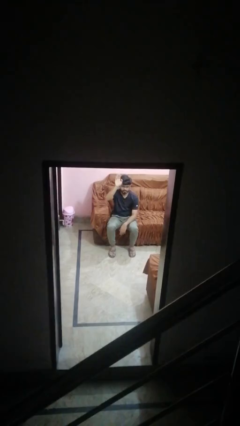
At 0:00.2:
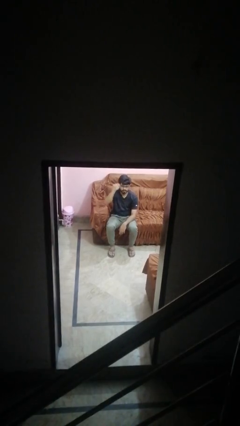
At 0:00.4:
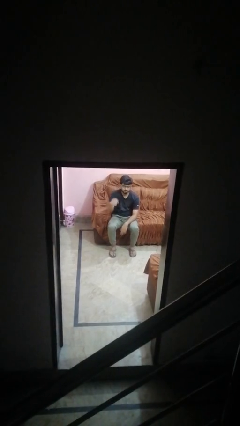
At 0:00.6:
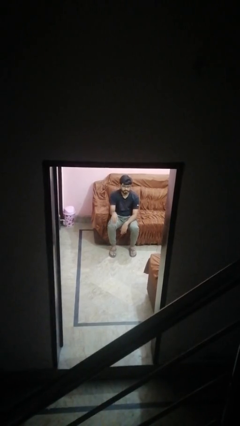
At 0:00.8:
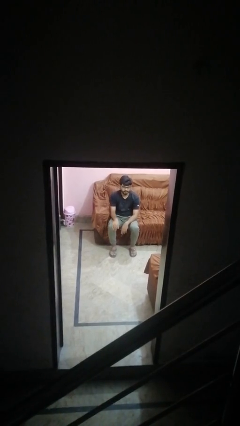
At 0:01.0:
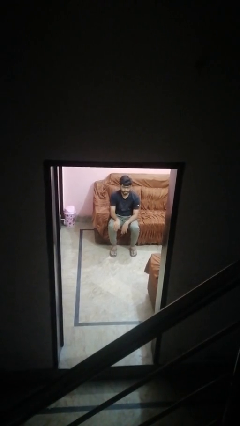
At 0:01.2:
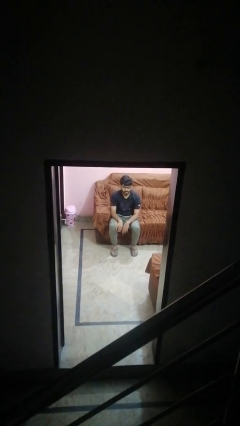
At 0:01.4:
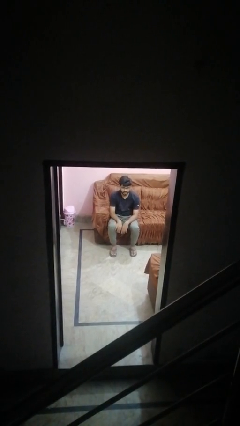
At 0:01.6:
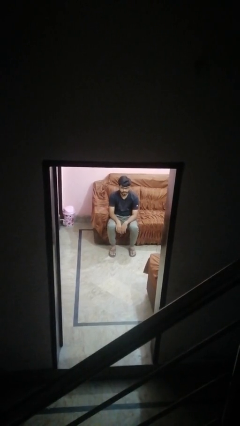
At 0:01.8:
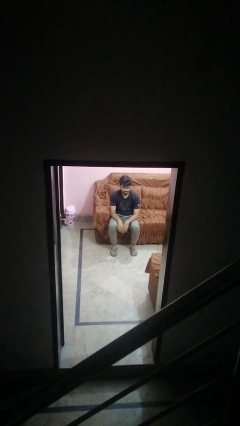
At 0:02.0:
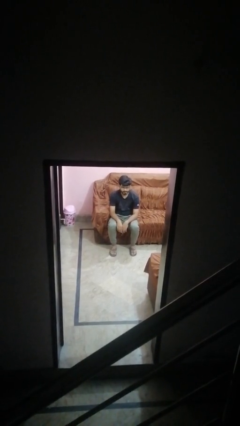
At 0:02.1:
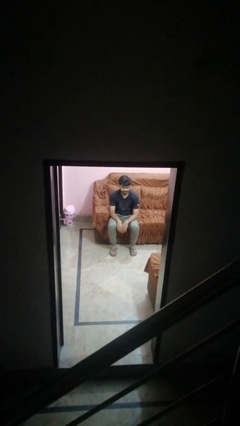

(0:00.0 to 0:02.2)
person gestures lower hand

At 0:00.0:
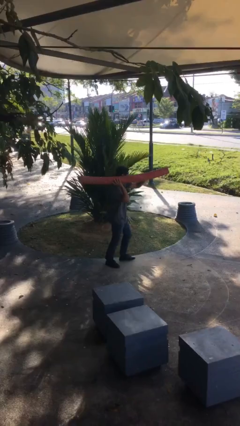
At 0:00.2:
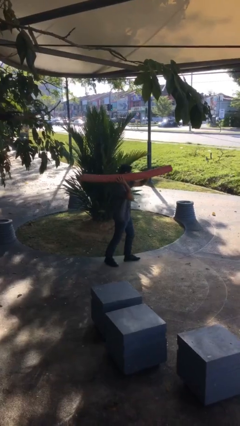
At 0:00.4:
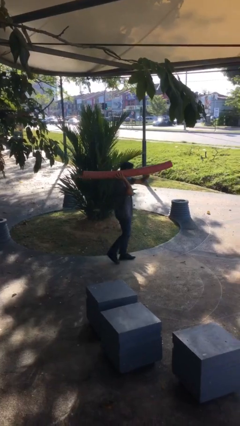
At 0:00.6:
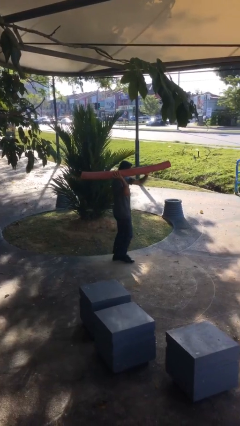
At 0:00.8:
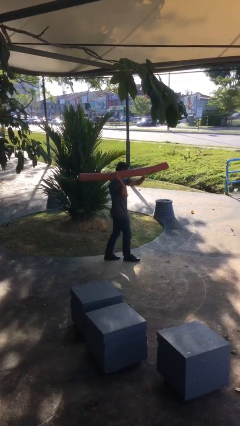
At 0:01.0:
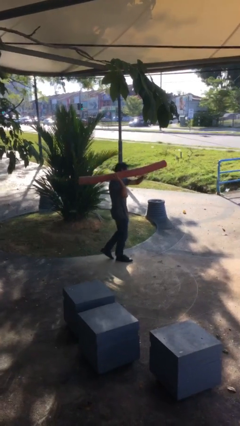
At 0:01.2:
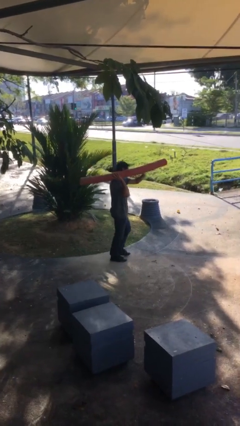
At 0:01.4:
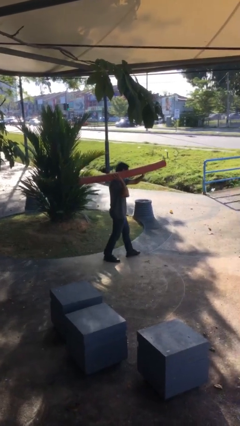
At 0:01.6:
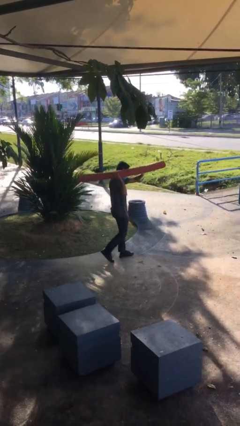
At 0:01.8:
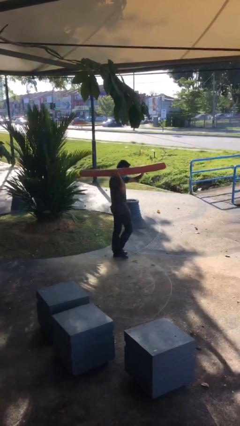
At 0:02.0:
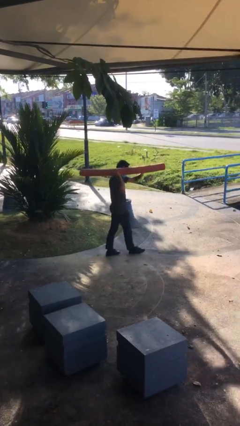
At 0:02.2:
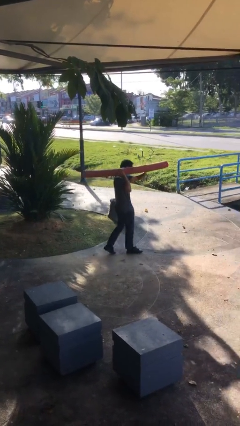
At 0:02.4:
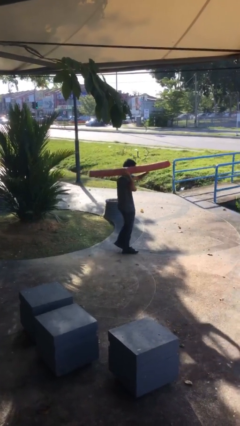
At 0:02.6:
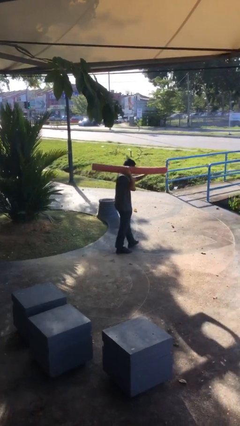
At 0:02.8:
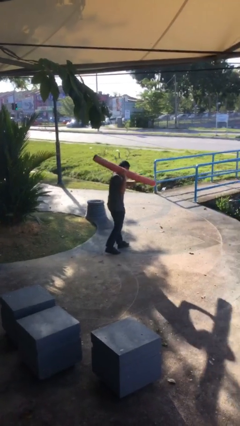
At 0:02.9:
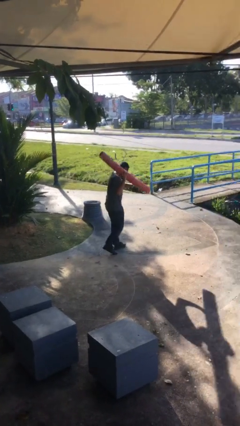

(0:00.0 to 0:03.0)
person carries heavy object

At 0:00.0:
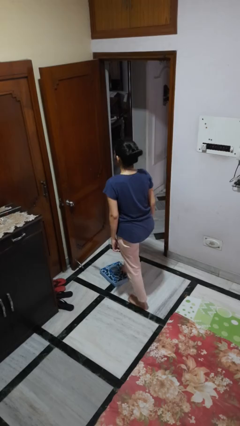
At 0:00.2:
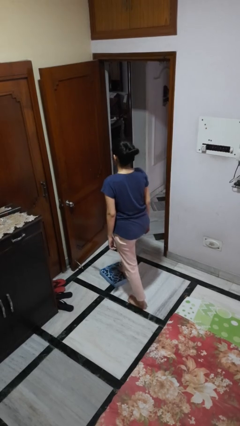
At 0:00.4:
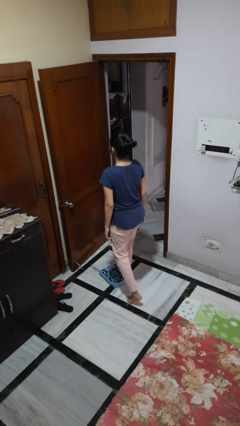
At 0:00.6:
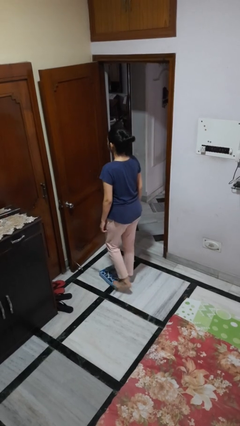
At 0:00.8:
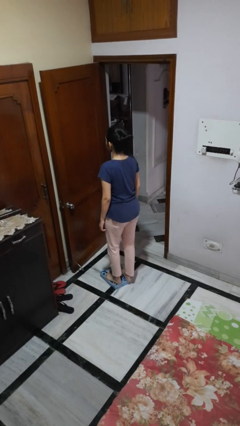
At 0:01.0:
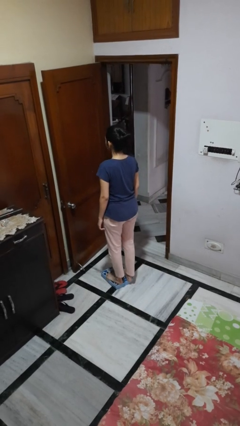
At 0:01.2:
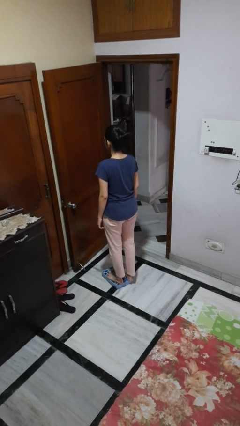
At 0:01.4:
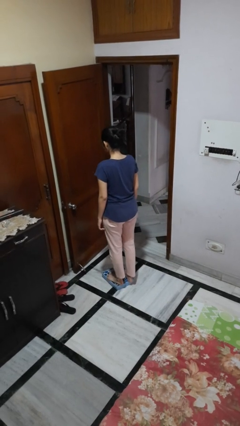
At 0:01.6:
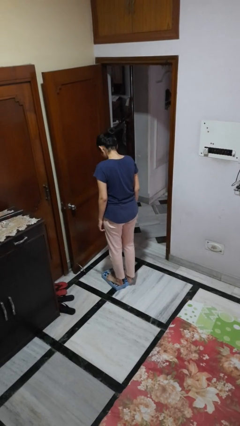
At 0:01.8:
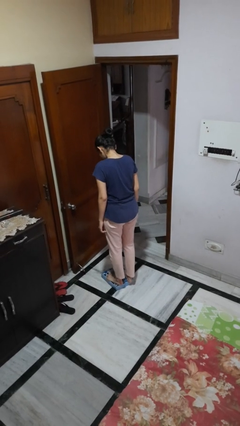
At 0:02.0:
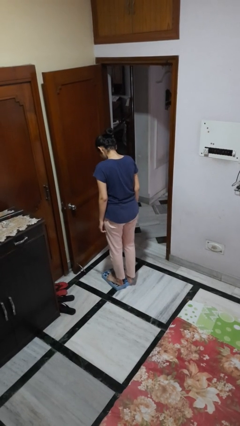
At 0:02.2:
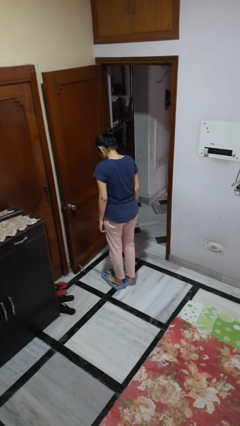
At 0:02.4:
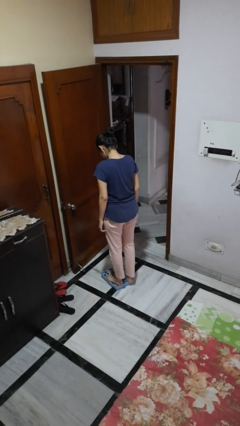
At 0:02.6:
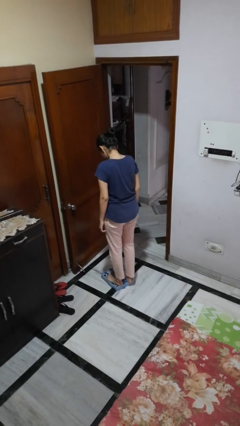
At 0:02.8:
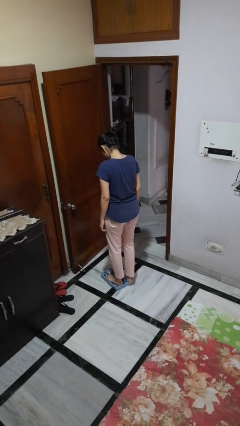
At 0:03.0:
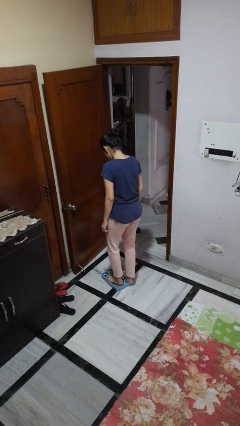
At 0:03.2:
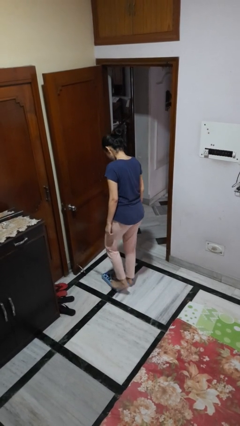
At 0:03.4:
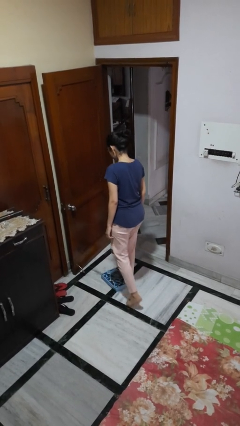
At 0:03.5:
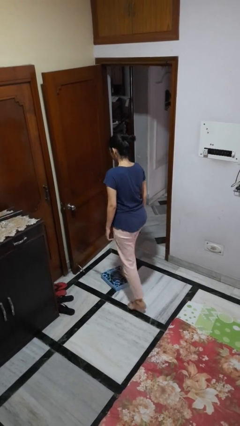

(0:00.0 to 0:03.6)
person uses bodyweight scale

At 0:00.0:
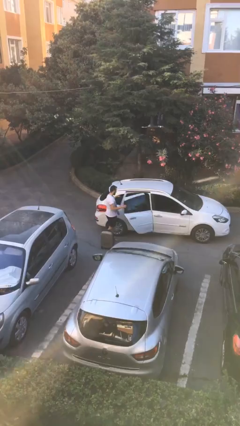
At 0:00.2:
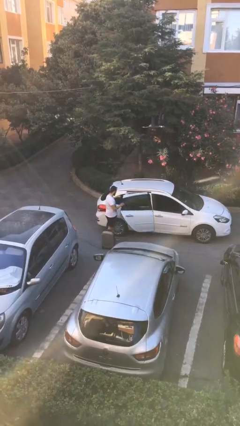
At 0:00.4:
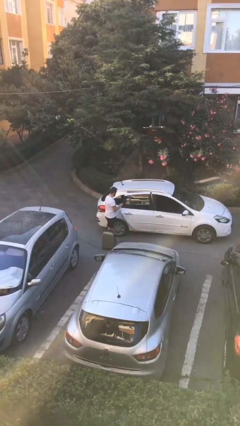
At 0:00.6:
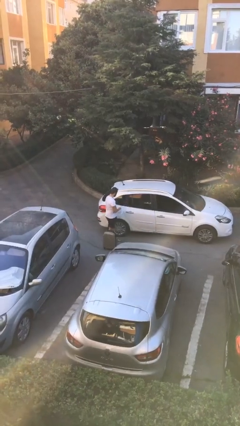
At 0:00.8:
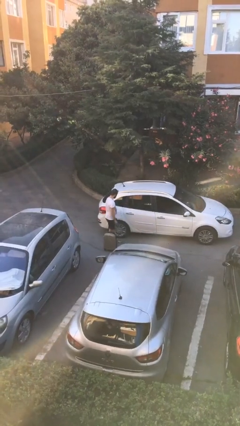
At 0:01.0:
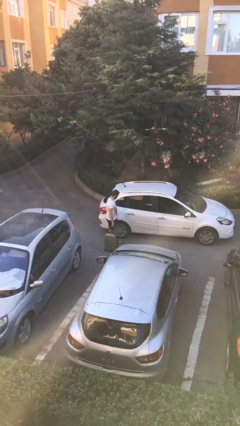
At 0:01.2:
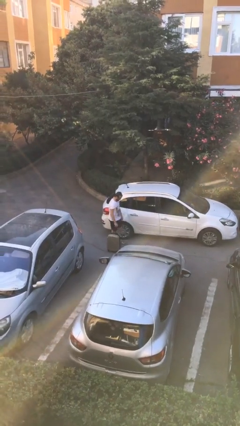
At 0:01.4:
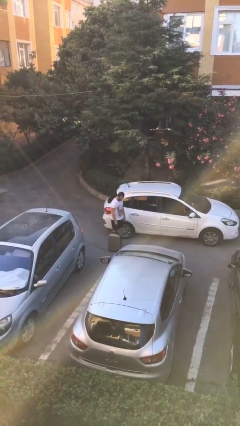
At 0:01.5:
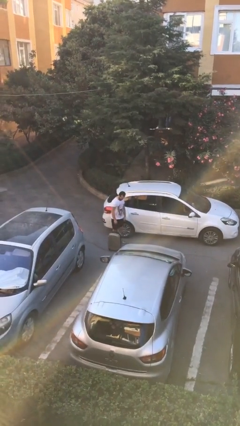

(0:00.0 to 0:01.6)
person closes car door

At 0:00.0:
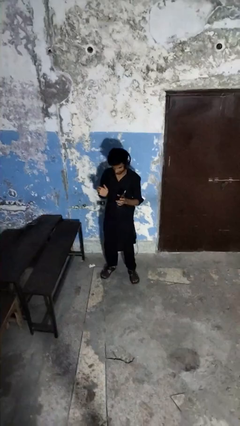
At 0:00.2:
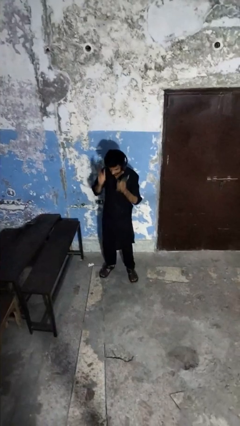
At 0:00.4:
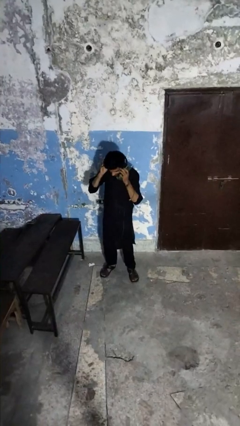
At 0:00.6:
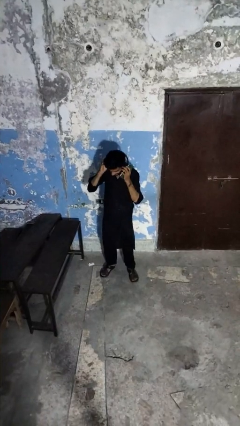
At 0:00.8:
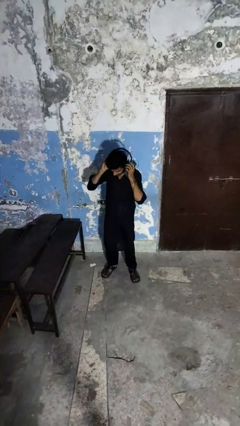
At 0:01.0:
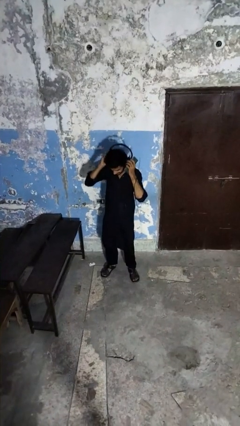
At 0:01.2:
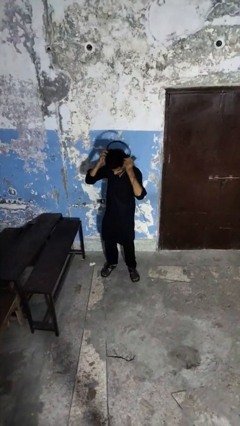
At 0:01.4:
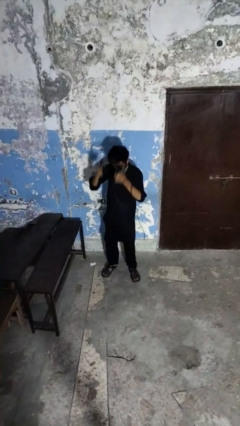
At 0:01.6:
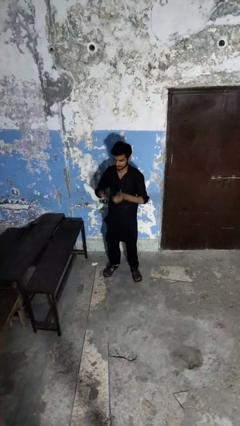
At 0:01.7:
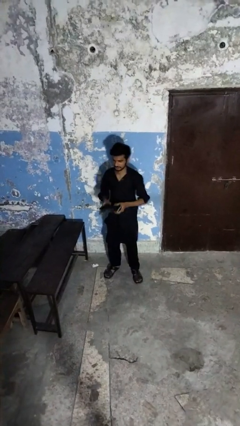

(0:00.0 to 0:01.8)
person takes off headphones

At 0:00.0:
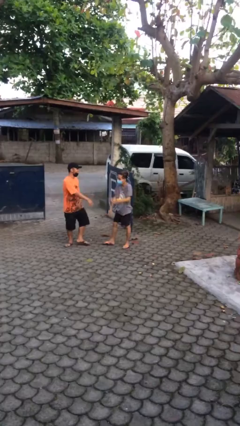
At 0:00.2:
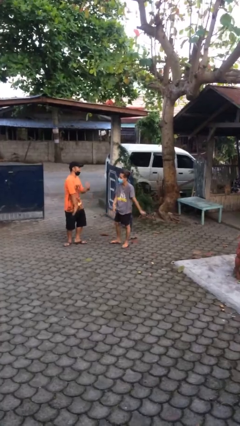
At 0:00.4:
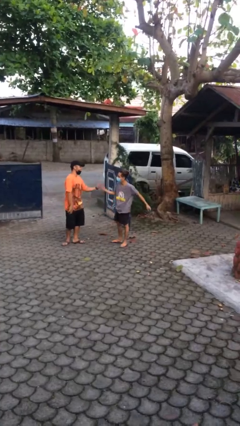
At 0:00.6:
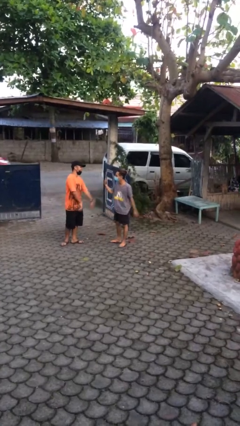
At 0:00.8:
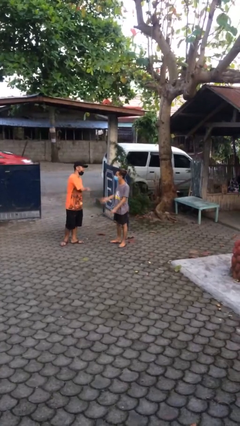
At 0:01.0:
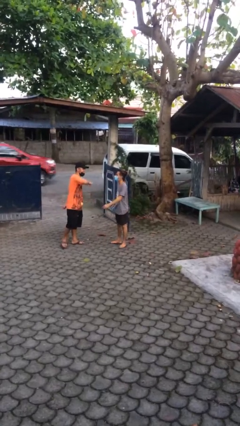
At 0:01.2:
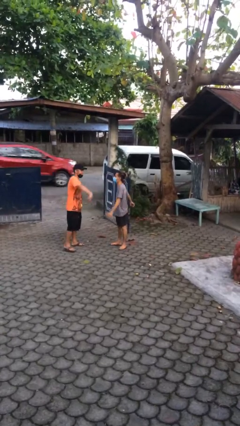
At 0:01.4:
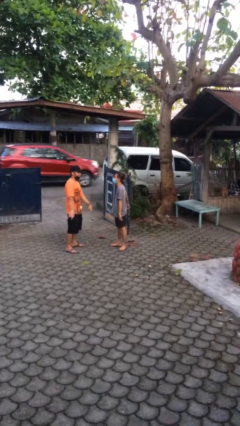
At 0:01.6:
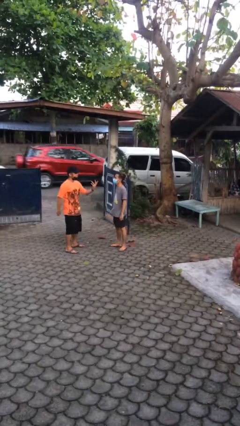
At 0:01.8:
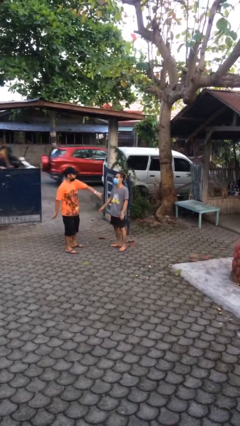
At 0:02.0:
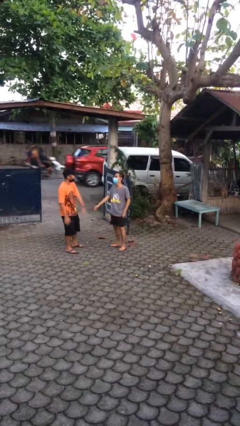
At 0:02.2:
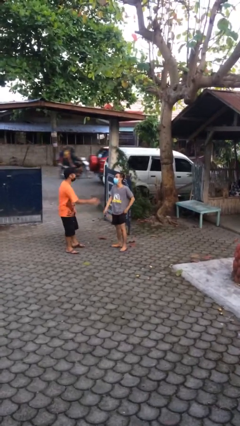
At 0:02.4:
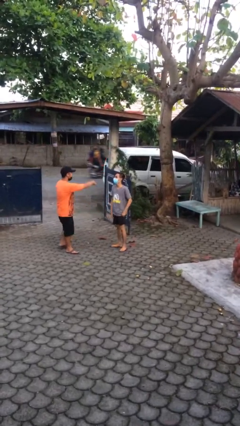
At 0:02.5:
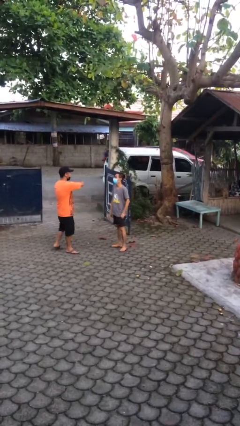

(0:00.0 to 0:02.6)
person talks to person

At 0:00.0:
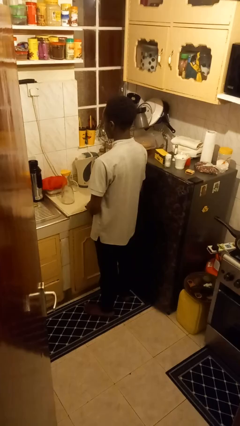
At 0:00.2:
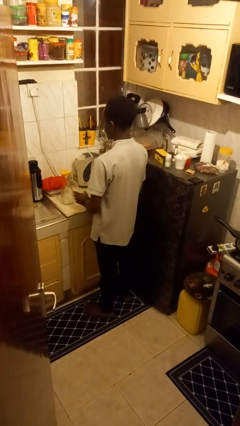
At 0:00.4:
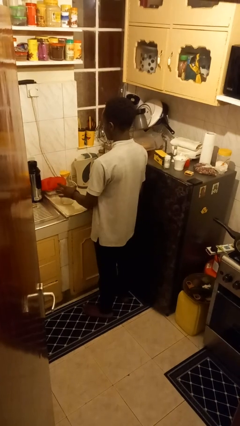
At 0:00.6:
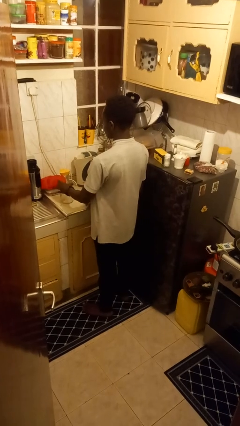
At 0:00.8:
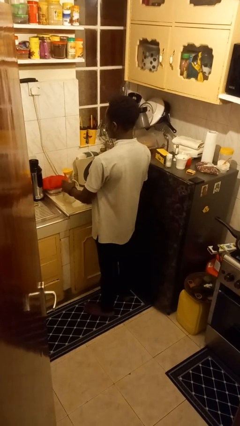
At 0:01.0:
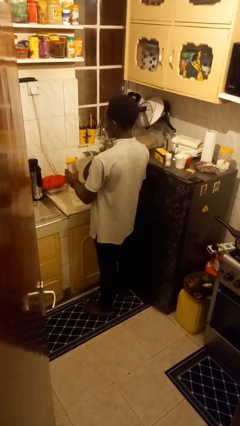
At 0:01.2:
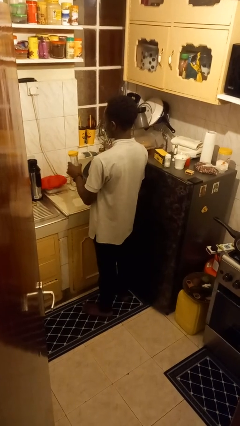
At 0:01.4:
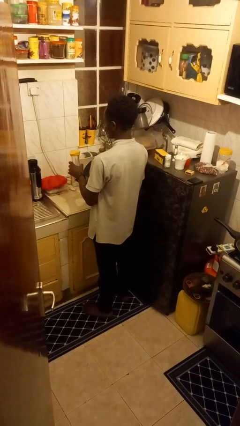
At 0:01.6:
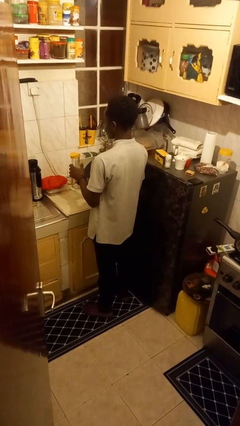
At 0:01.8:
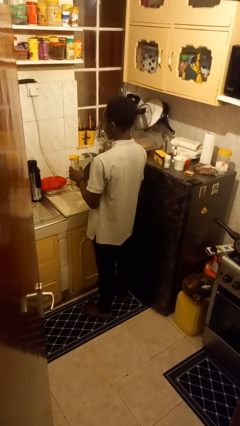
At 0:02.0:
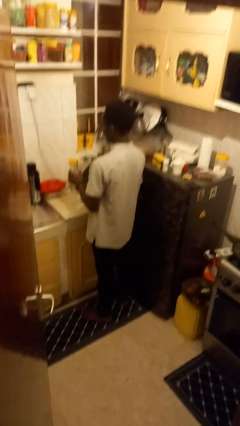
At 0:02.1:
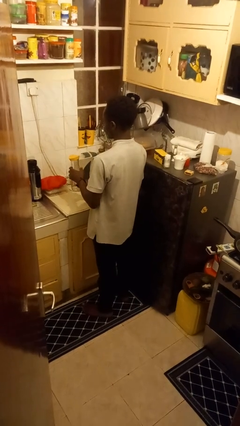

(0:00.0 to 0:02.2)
person picks up object from countertop
